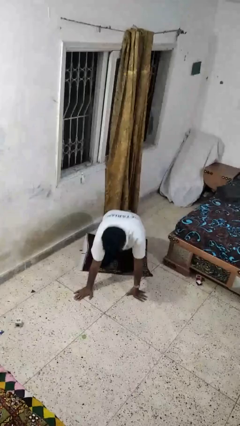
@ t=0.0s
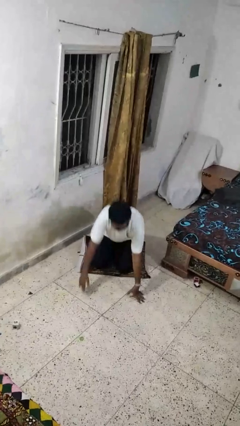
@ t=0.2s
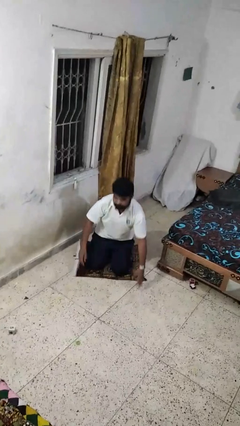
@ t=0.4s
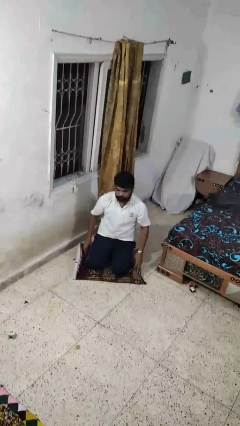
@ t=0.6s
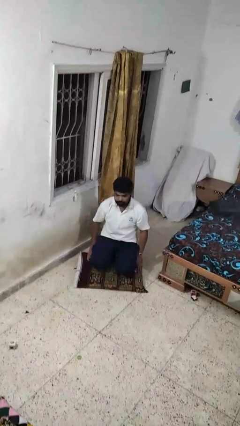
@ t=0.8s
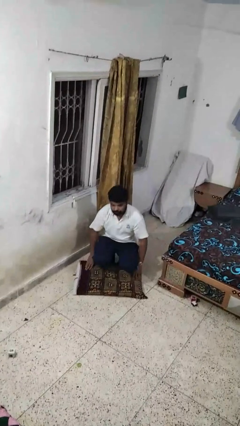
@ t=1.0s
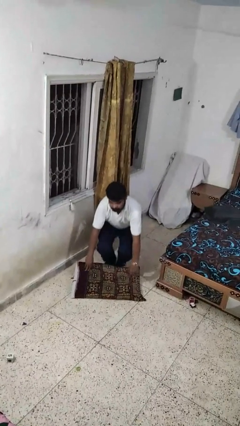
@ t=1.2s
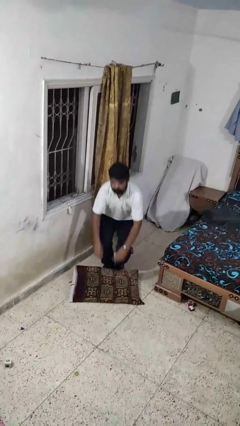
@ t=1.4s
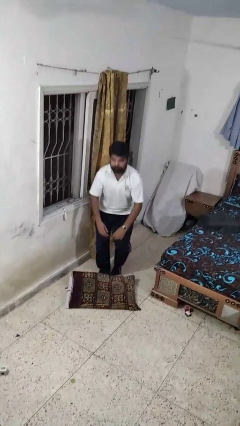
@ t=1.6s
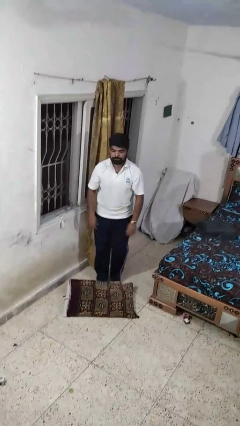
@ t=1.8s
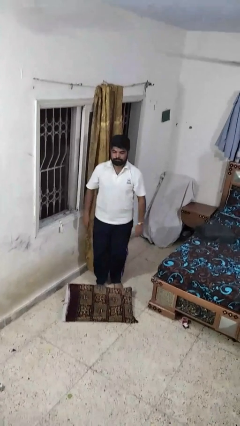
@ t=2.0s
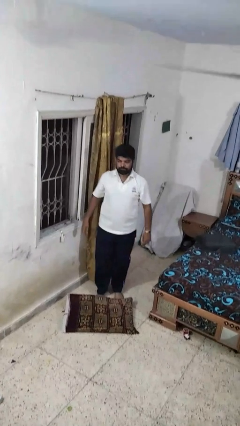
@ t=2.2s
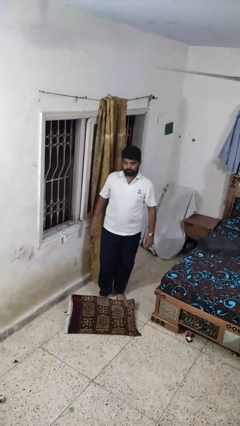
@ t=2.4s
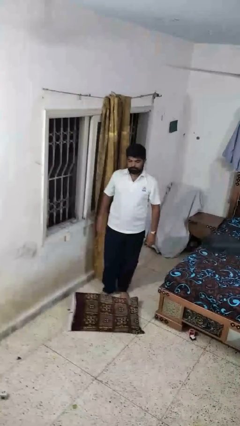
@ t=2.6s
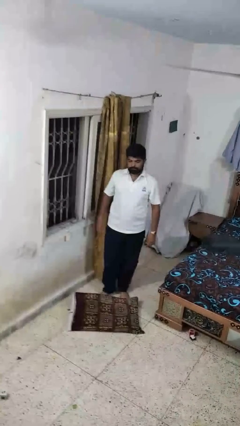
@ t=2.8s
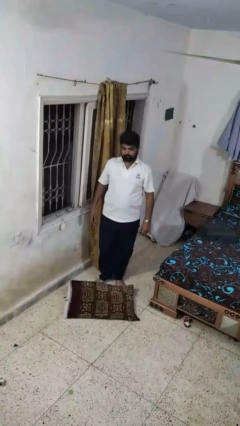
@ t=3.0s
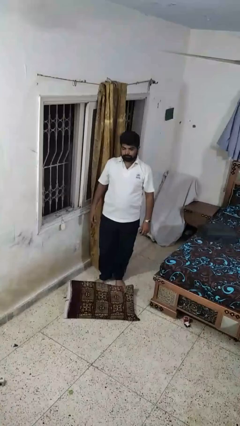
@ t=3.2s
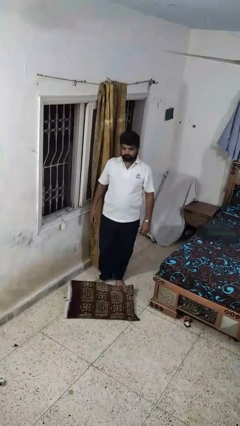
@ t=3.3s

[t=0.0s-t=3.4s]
person stands up from floor

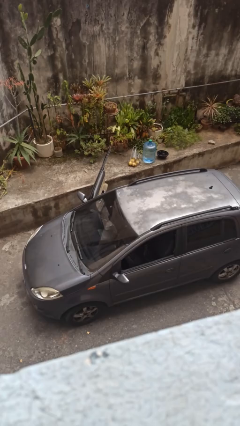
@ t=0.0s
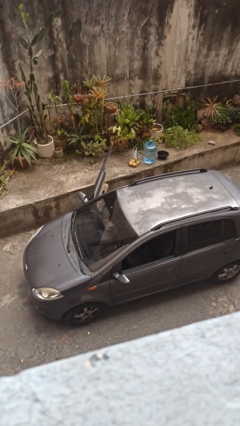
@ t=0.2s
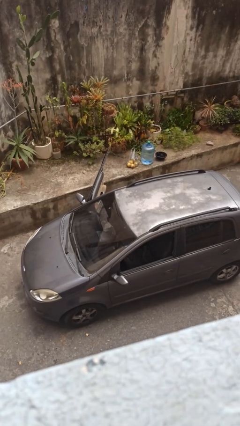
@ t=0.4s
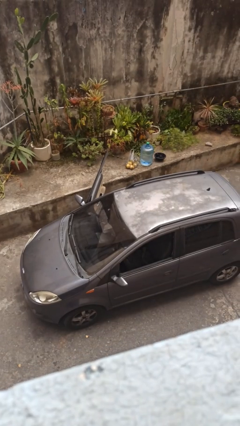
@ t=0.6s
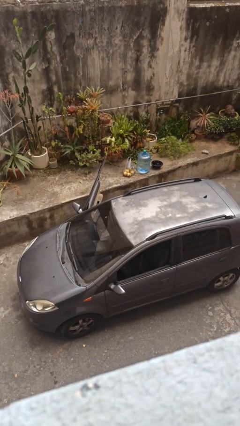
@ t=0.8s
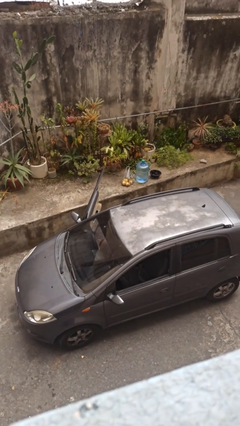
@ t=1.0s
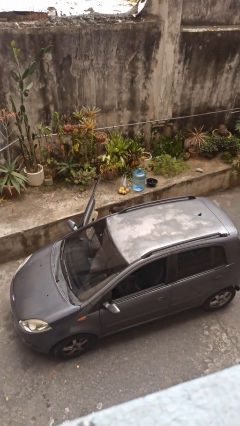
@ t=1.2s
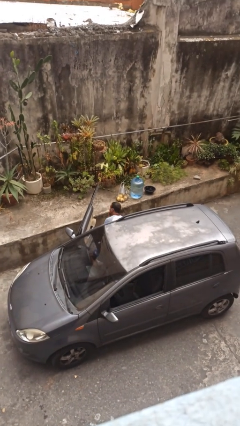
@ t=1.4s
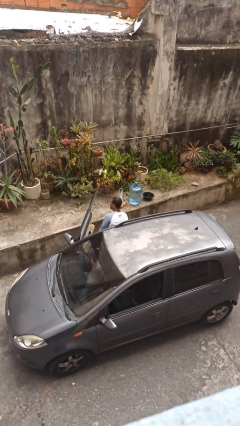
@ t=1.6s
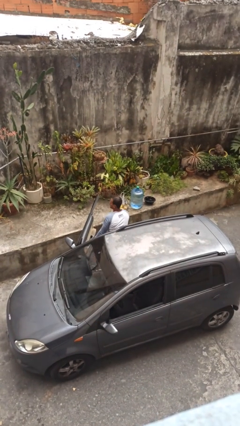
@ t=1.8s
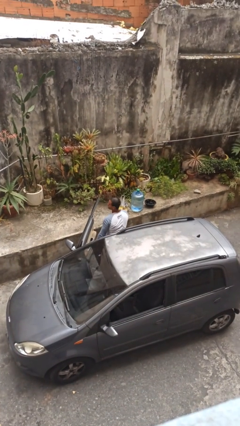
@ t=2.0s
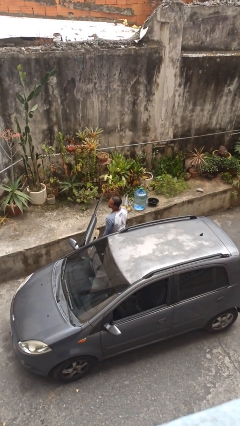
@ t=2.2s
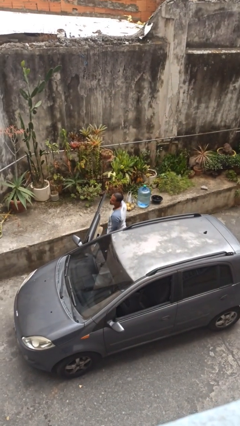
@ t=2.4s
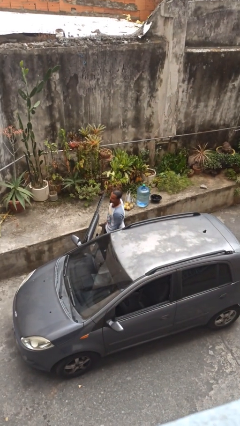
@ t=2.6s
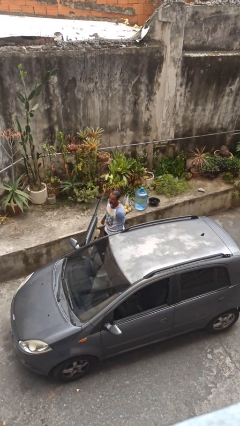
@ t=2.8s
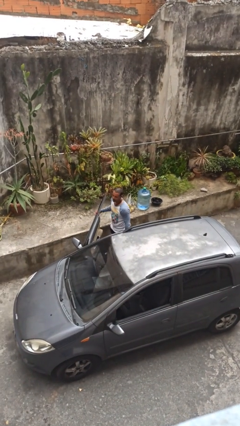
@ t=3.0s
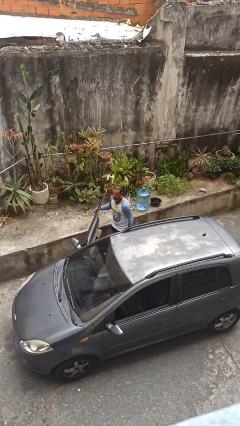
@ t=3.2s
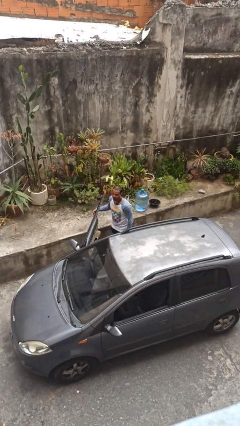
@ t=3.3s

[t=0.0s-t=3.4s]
person exits car

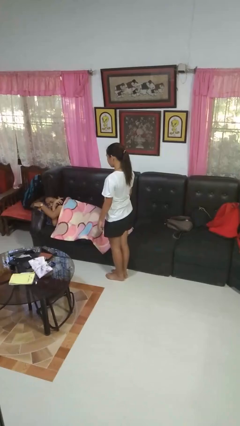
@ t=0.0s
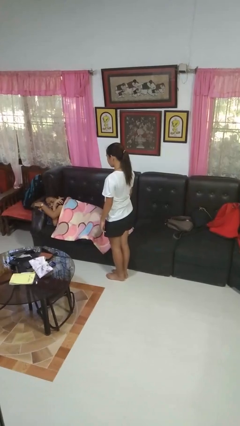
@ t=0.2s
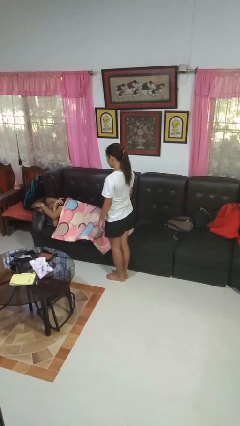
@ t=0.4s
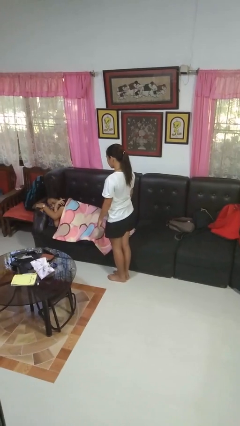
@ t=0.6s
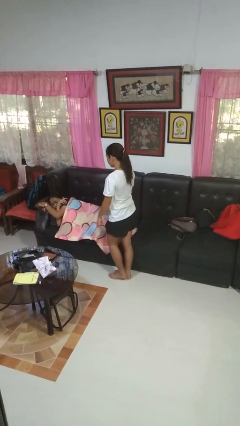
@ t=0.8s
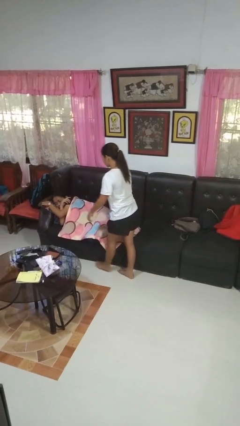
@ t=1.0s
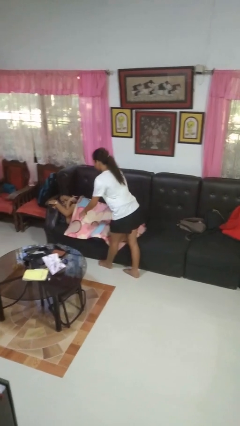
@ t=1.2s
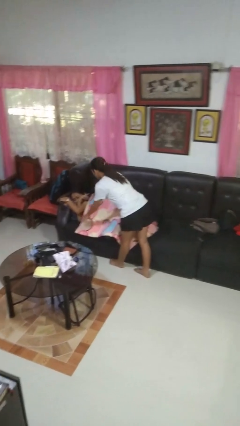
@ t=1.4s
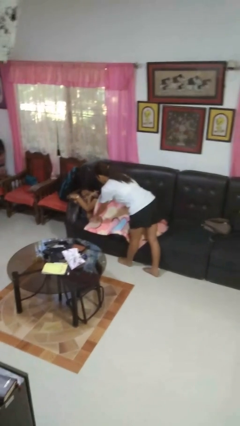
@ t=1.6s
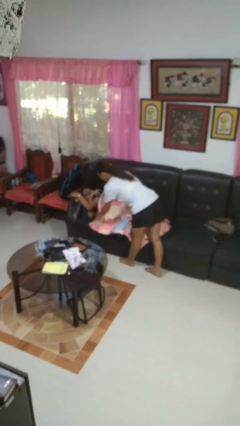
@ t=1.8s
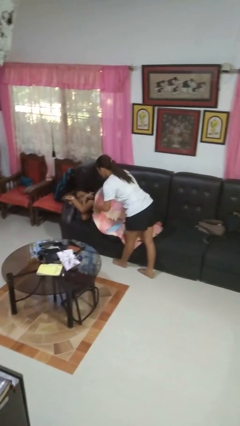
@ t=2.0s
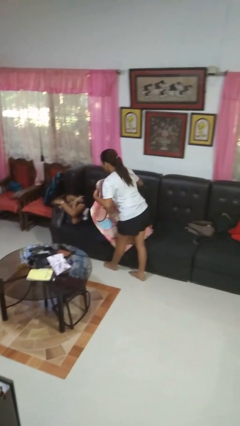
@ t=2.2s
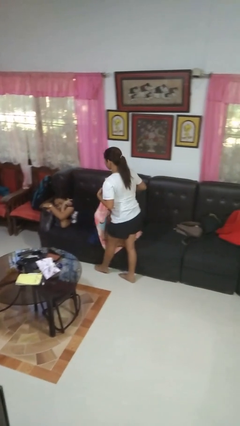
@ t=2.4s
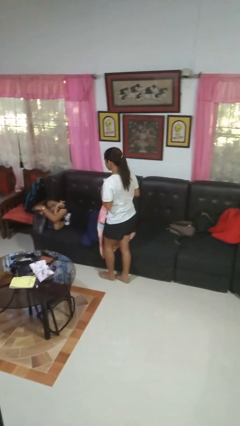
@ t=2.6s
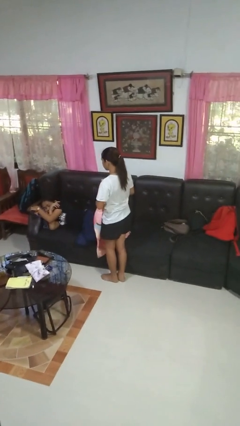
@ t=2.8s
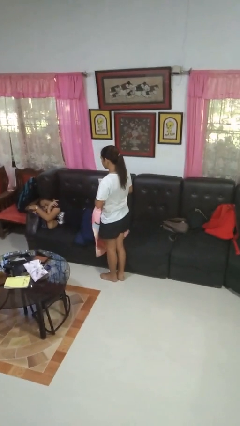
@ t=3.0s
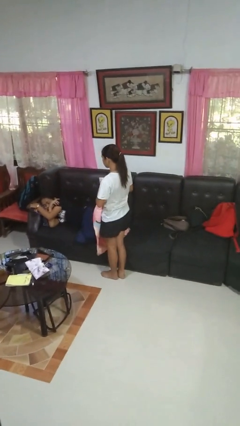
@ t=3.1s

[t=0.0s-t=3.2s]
person uncovers friend with blanket

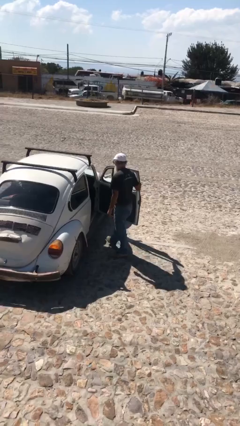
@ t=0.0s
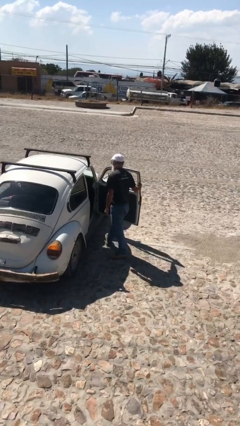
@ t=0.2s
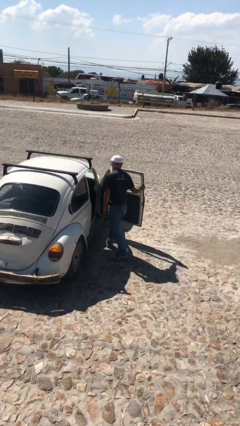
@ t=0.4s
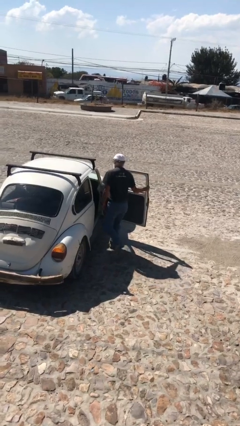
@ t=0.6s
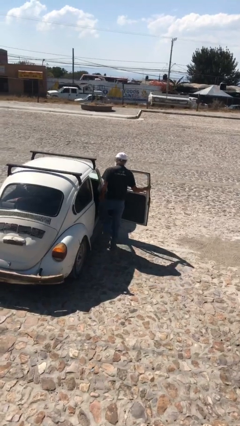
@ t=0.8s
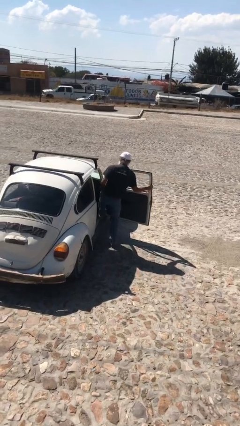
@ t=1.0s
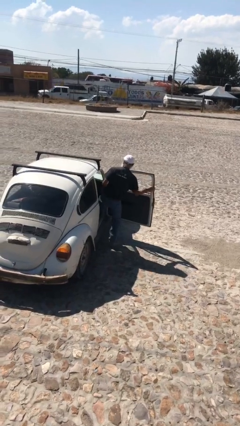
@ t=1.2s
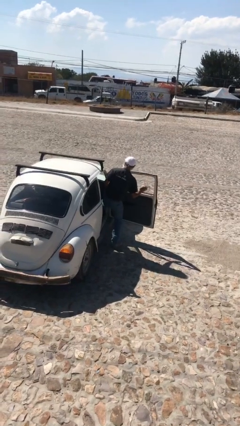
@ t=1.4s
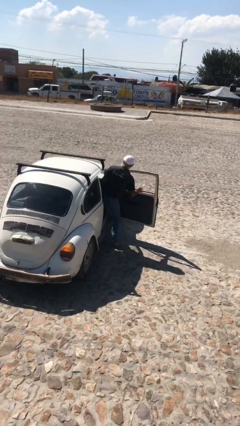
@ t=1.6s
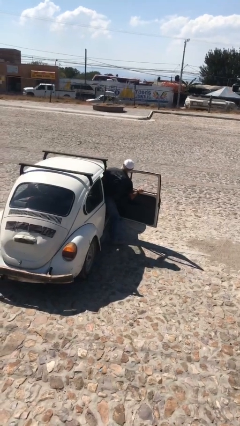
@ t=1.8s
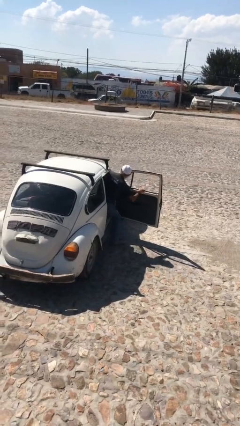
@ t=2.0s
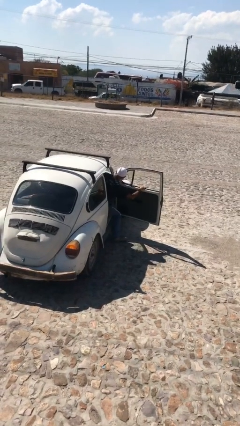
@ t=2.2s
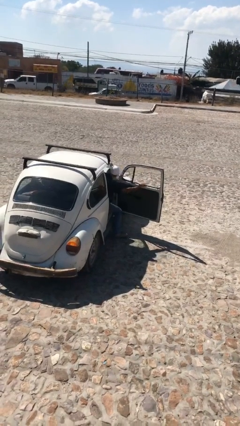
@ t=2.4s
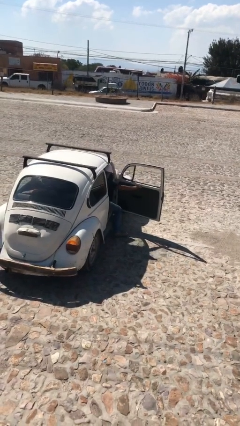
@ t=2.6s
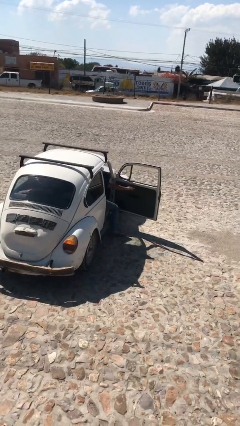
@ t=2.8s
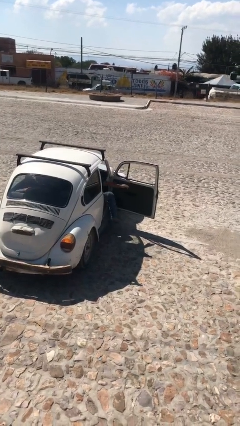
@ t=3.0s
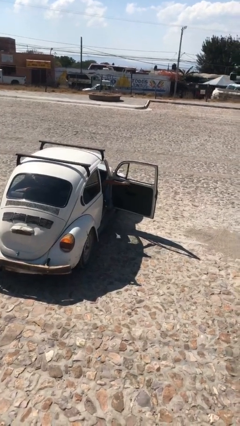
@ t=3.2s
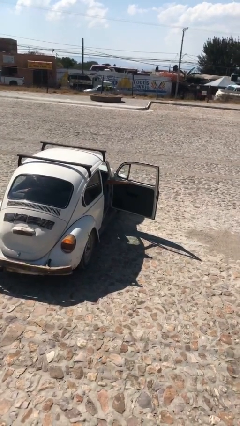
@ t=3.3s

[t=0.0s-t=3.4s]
person enters car

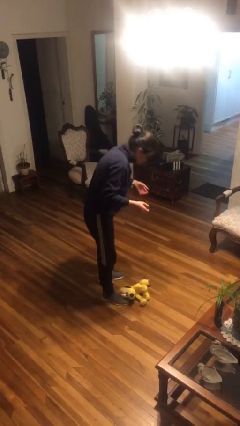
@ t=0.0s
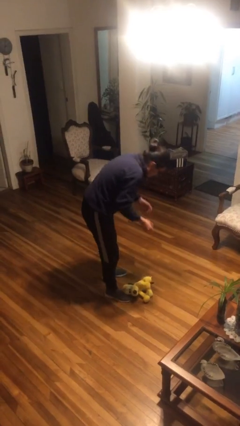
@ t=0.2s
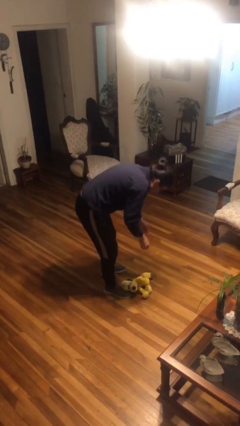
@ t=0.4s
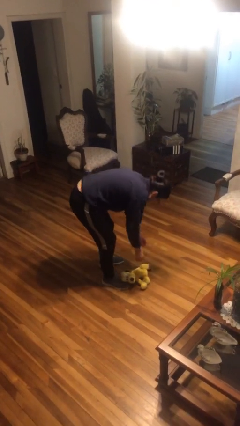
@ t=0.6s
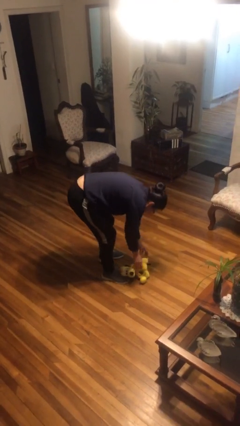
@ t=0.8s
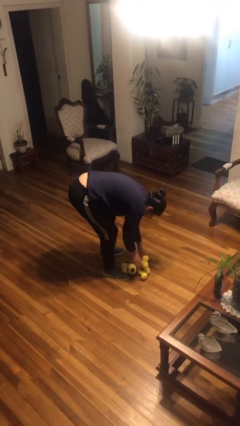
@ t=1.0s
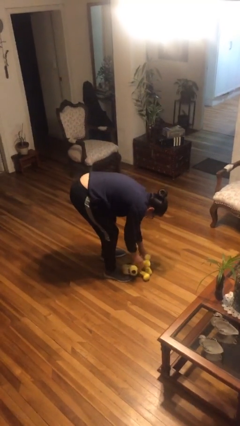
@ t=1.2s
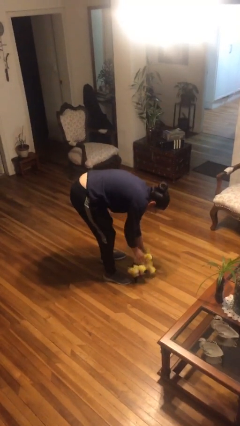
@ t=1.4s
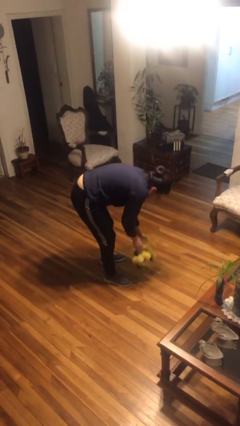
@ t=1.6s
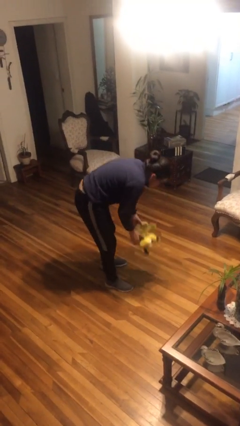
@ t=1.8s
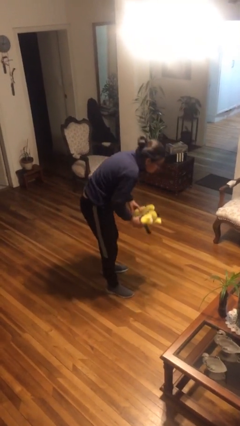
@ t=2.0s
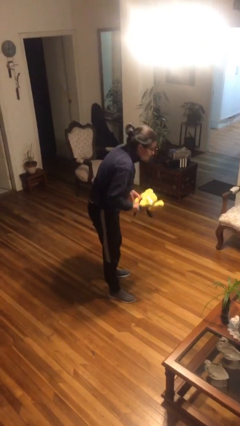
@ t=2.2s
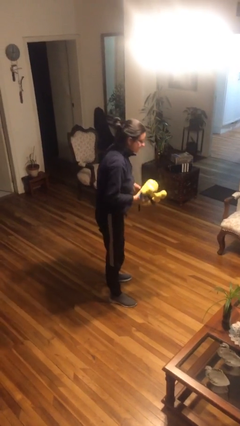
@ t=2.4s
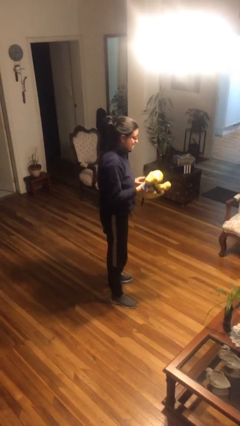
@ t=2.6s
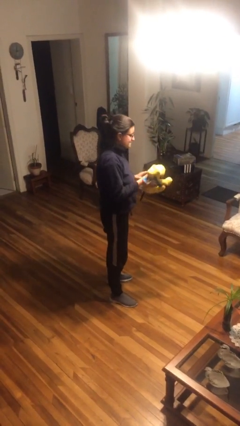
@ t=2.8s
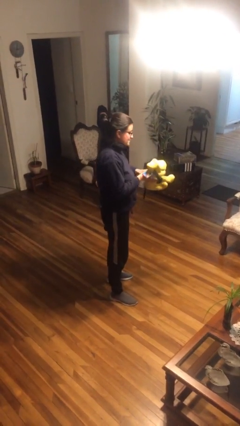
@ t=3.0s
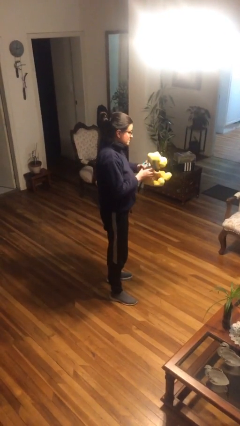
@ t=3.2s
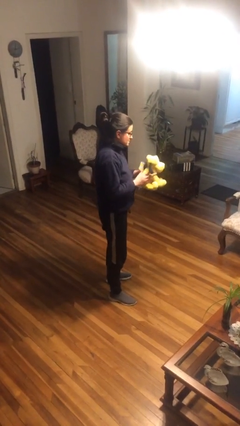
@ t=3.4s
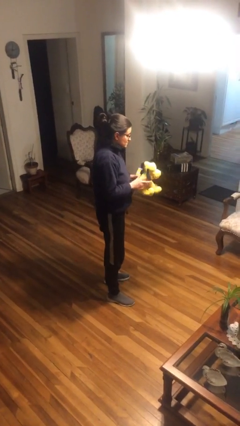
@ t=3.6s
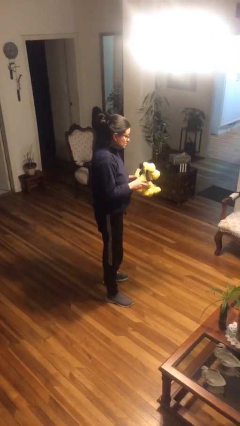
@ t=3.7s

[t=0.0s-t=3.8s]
person picks up object from floor
